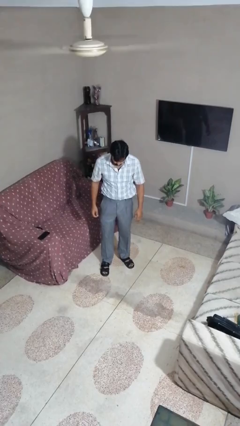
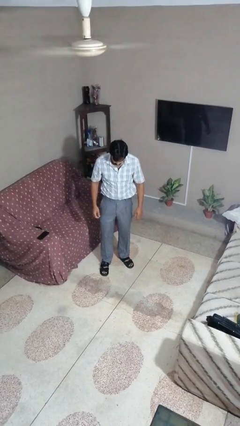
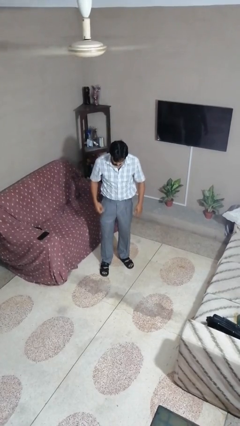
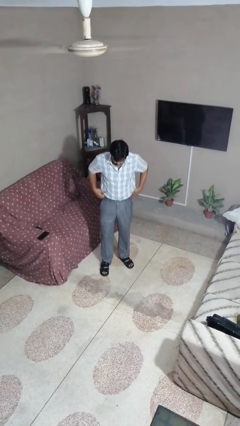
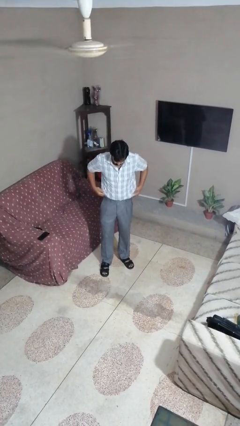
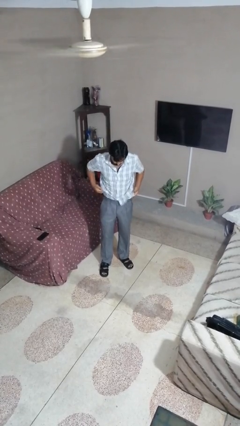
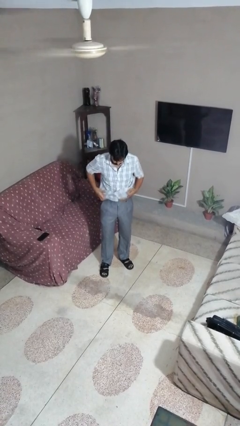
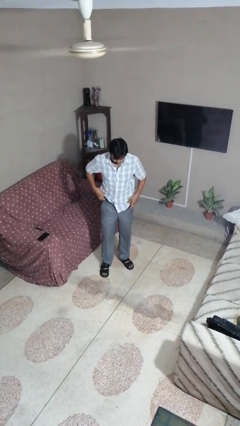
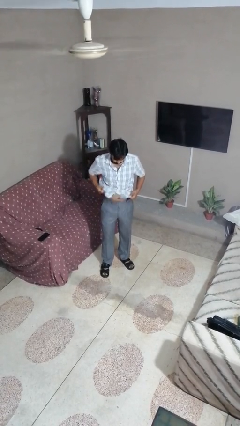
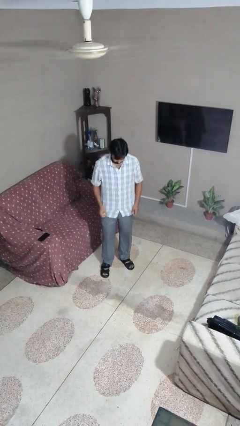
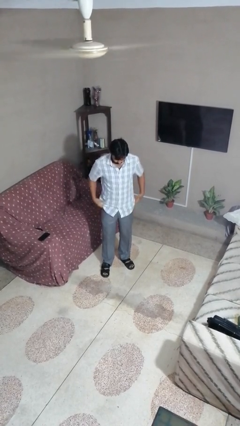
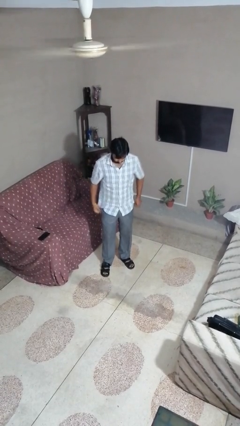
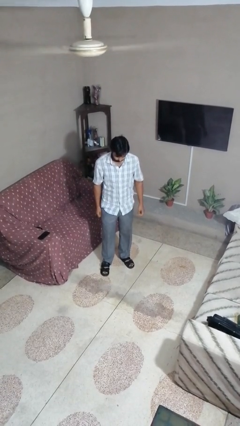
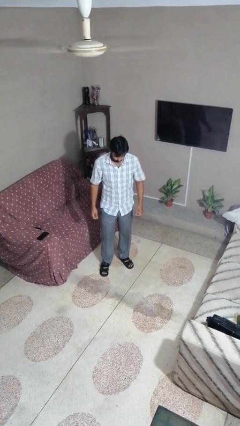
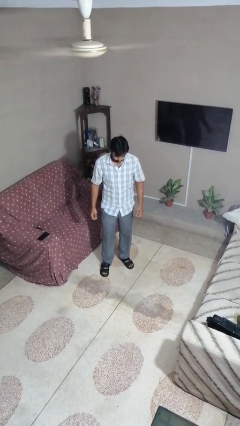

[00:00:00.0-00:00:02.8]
person untucks shirt

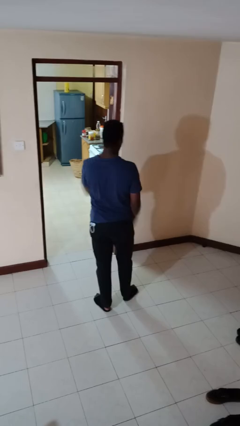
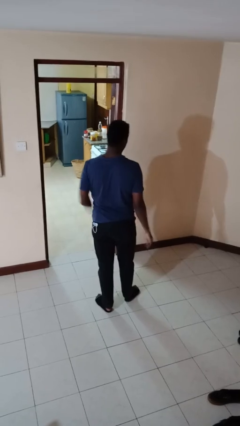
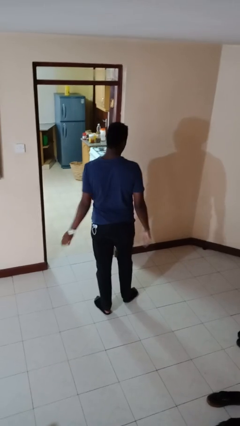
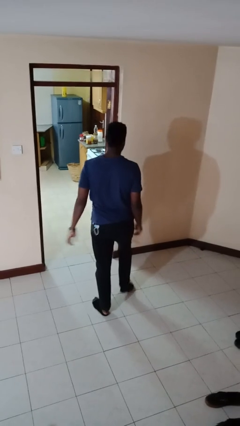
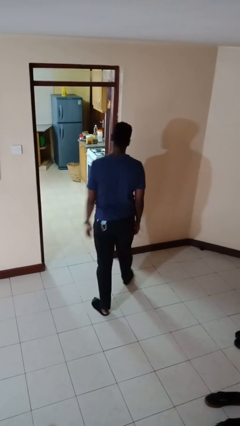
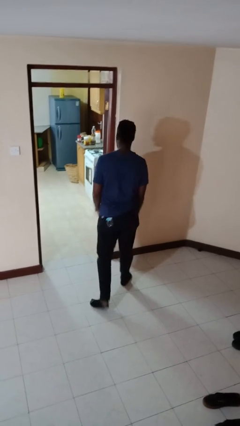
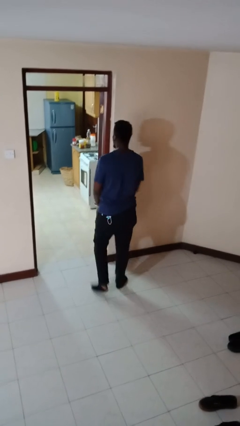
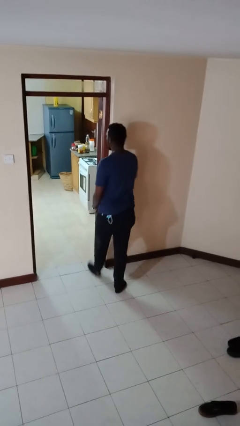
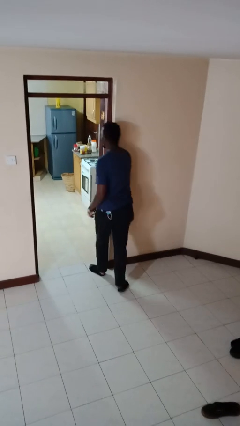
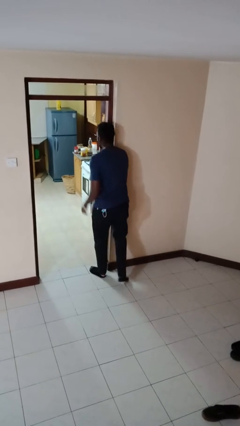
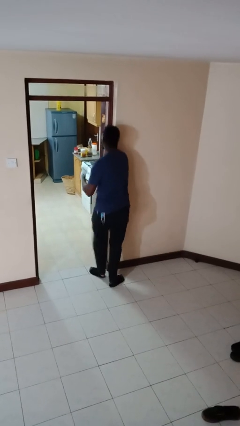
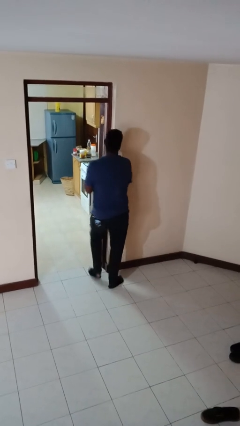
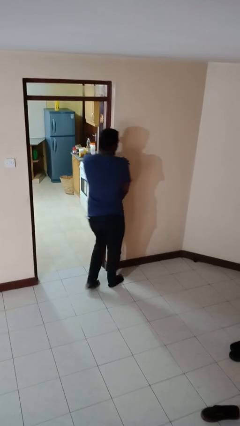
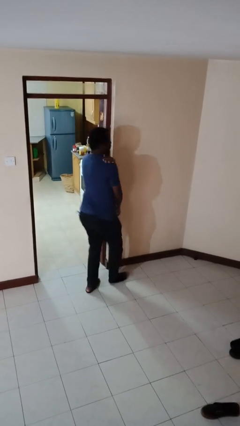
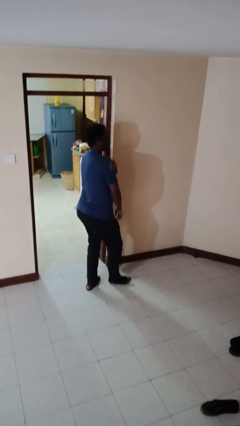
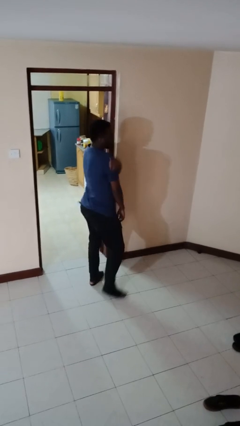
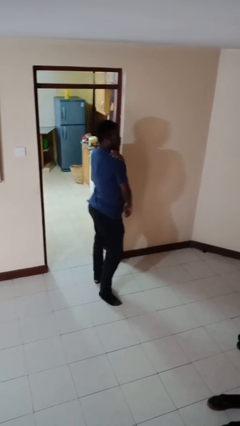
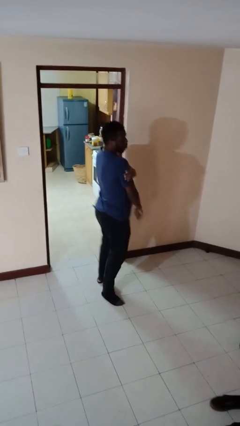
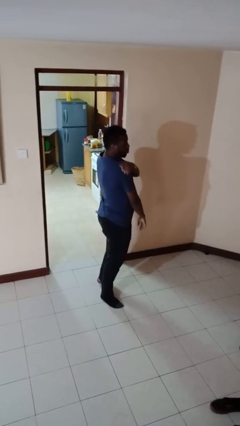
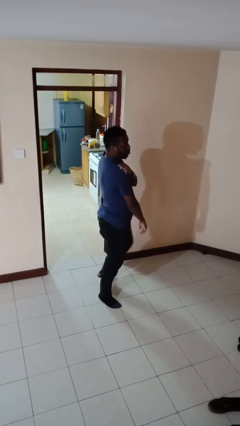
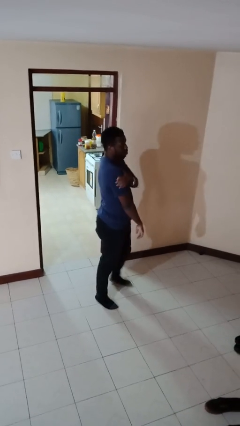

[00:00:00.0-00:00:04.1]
person bumps into wall

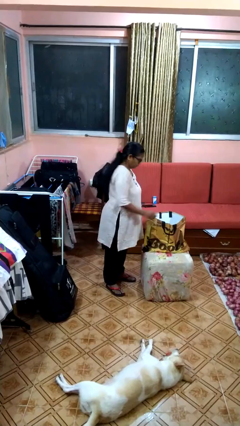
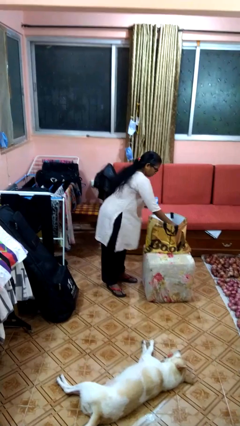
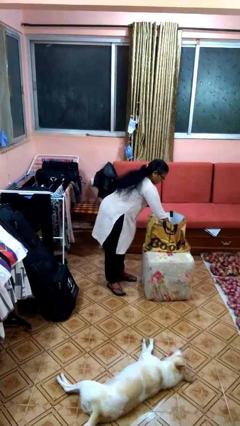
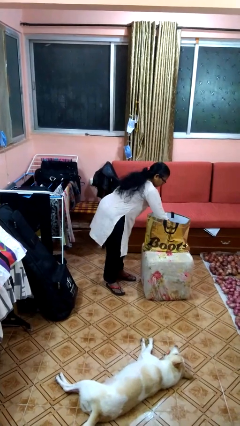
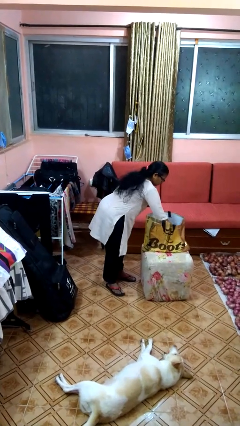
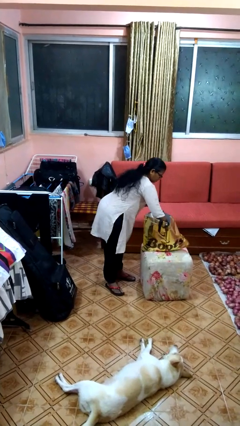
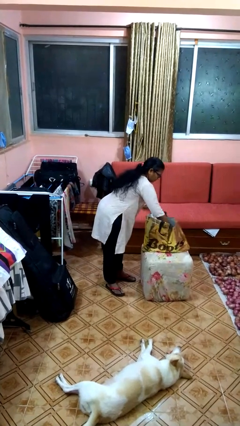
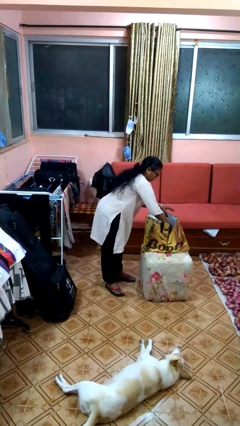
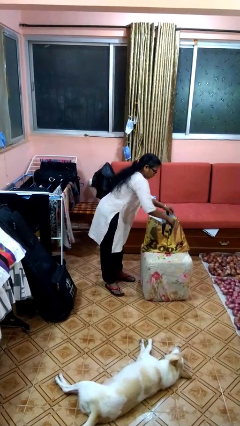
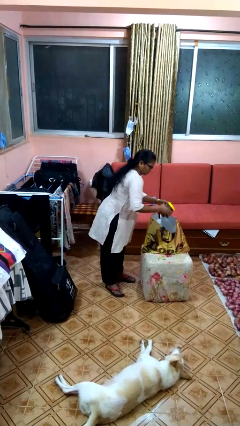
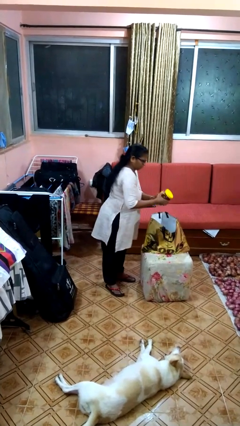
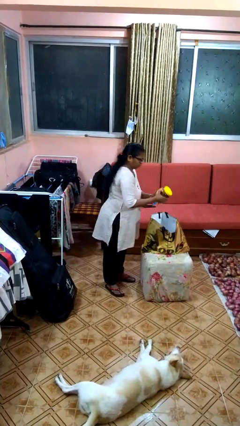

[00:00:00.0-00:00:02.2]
person takes object from bag

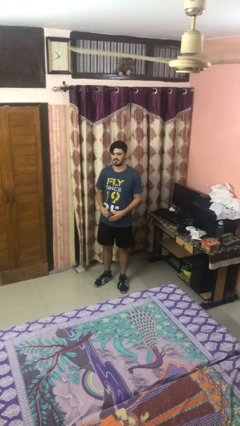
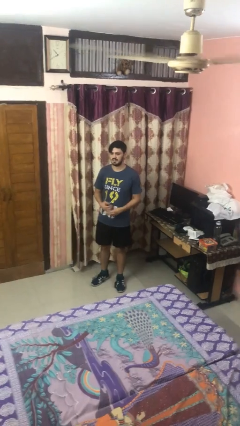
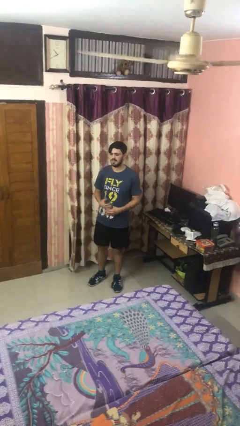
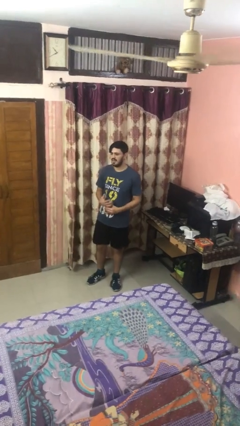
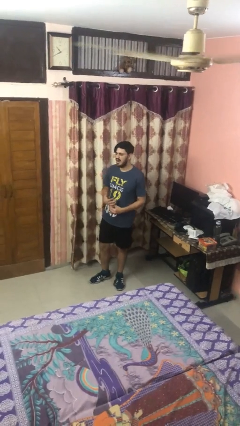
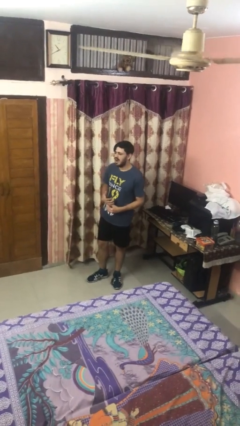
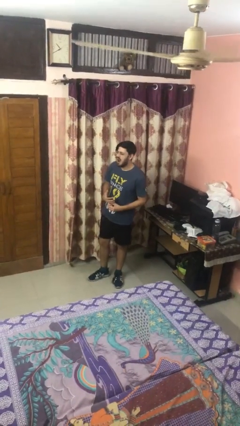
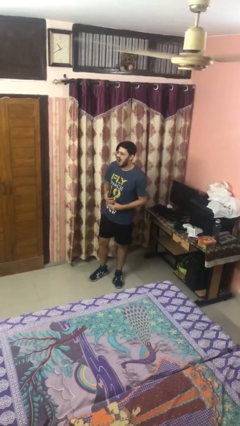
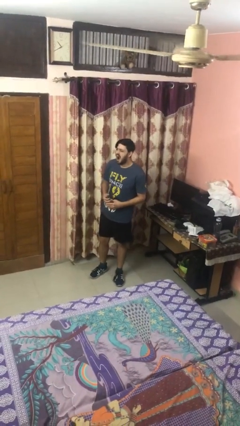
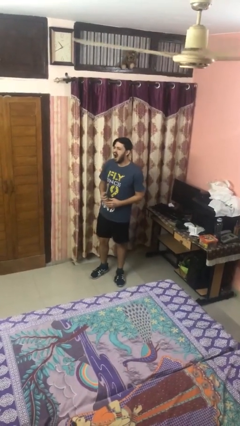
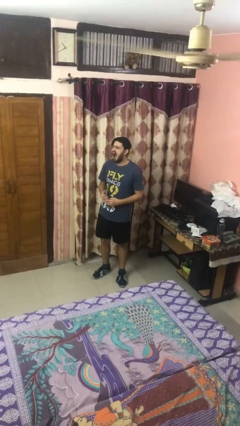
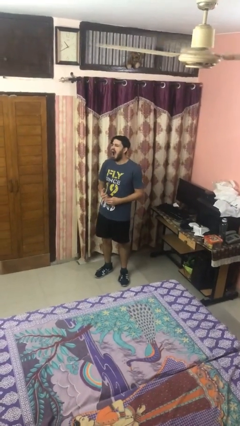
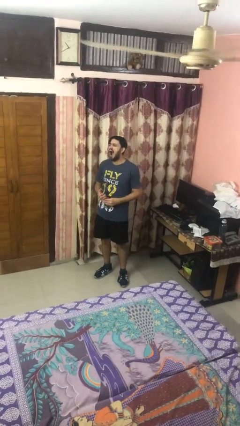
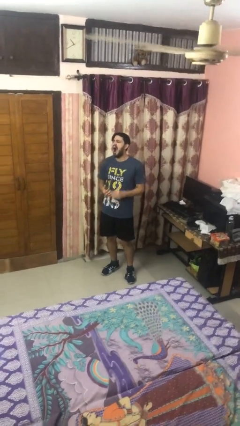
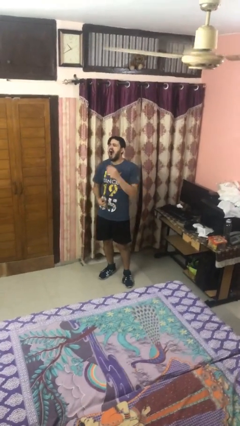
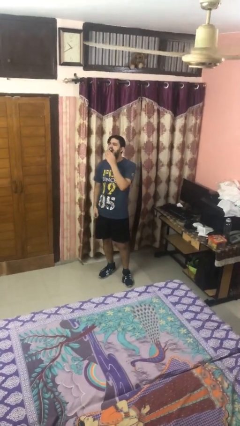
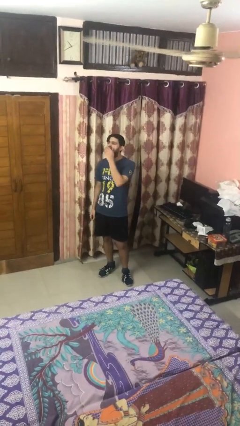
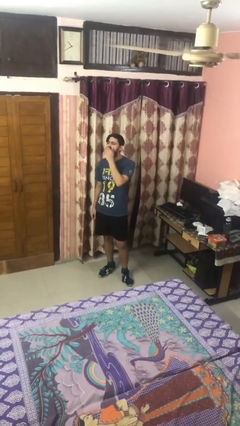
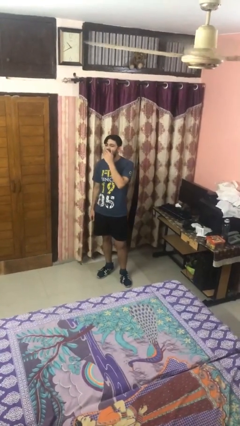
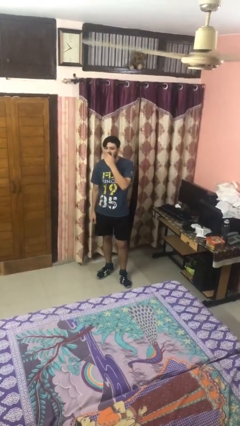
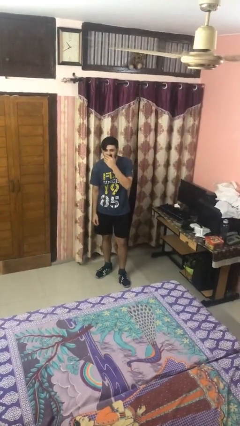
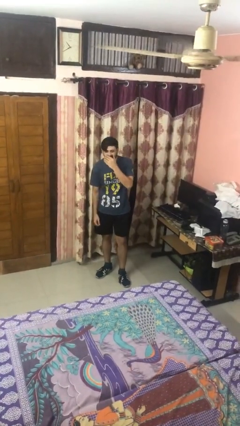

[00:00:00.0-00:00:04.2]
person yawns

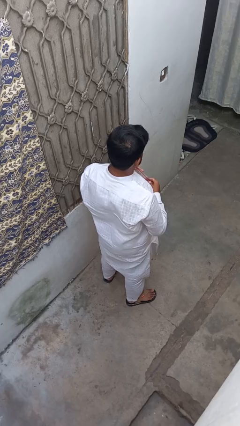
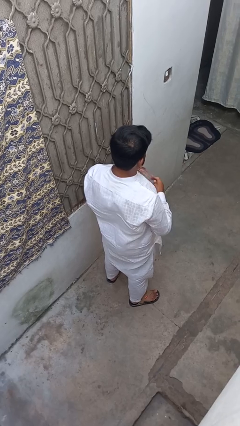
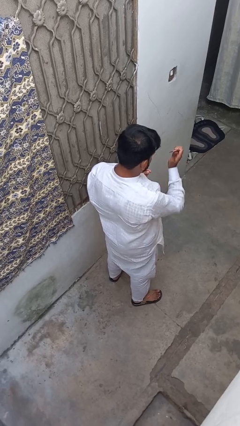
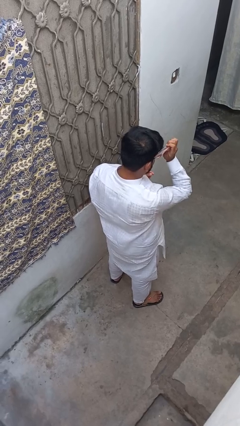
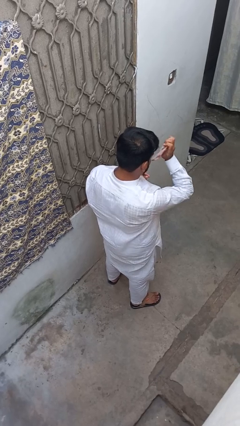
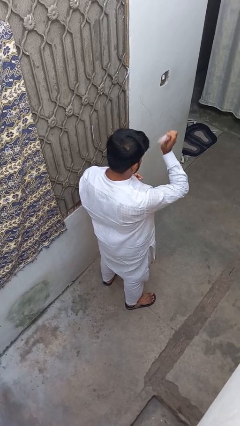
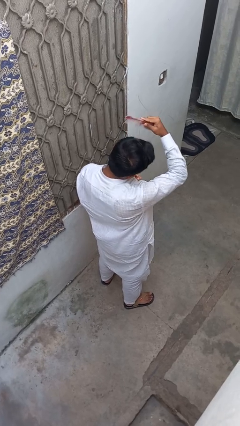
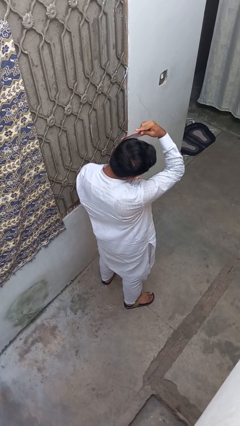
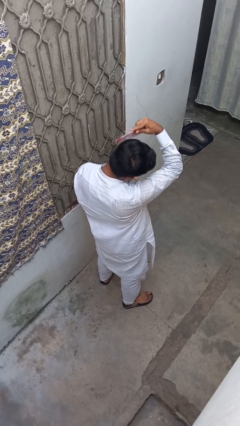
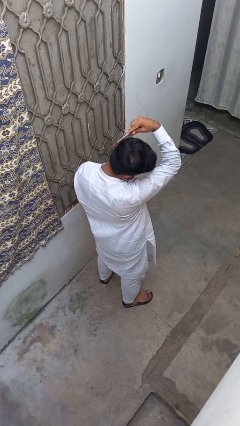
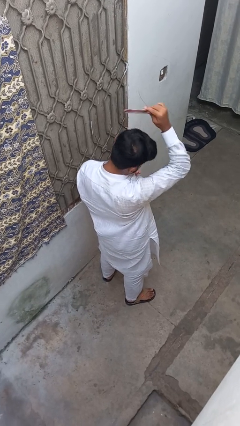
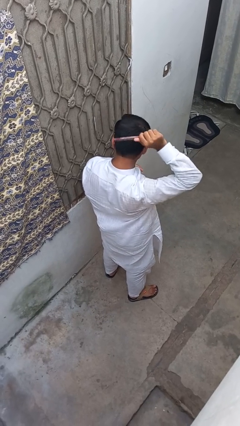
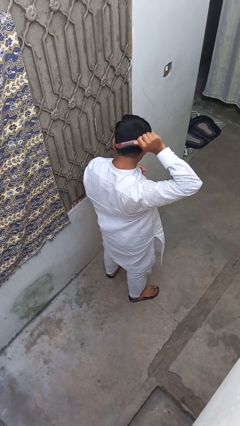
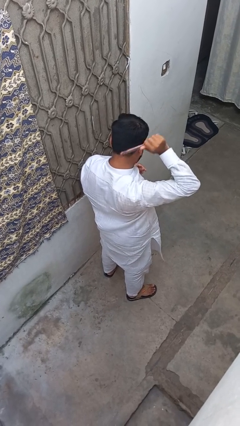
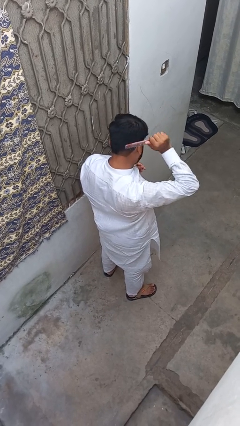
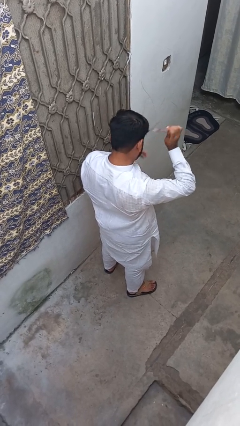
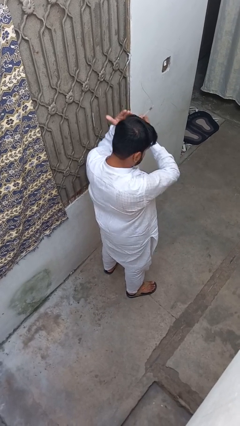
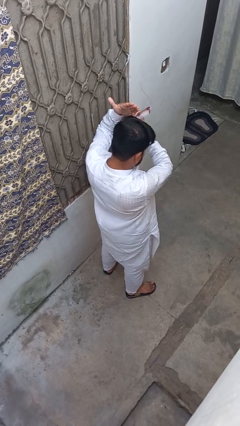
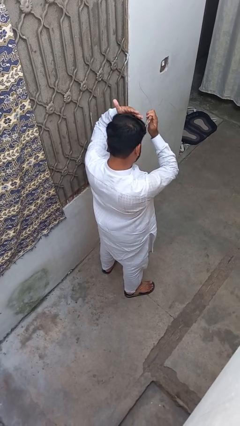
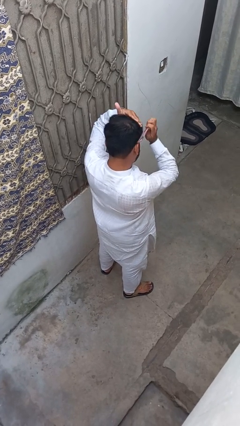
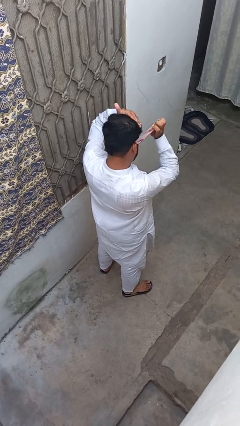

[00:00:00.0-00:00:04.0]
person brushes hair

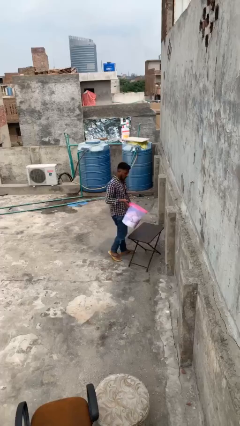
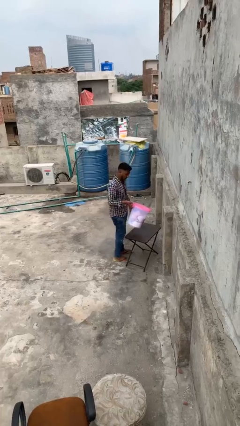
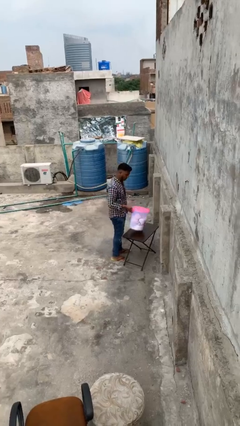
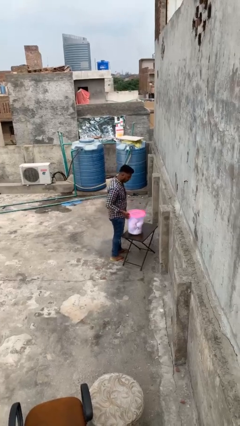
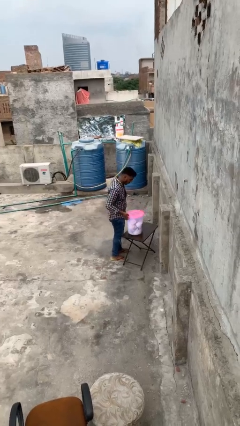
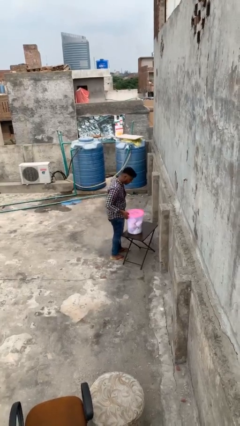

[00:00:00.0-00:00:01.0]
person puts down object on table
